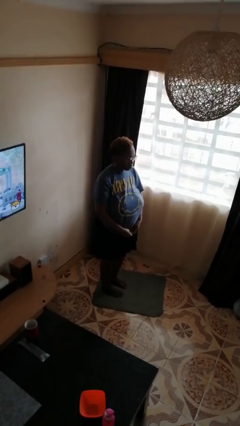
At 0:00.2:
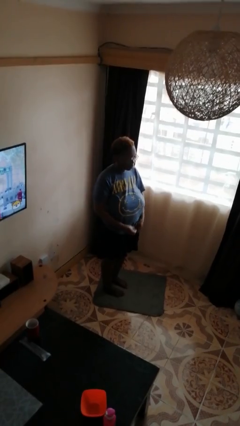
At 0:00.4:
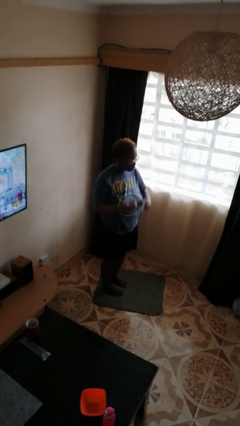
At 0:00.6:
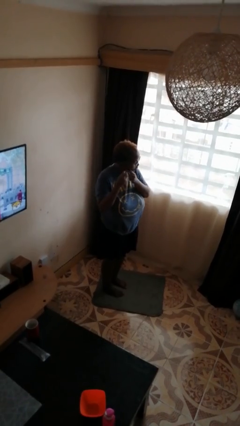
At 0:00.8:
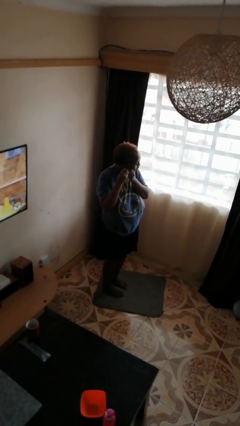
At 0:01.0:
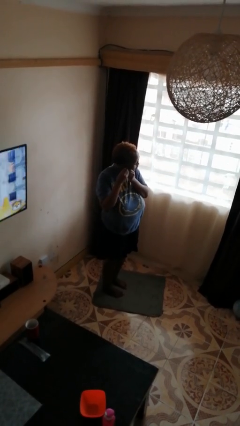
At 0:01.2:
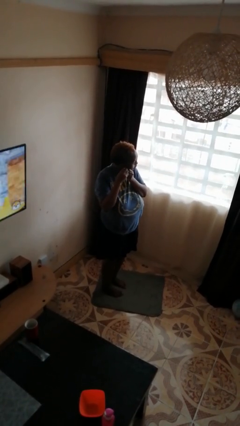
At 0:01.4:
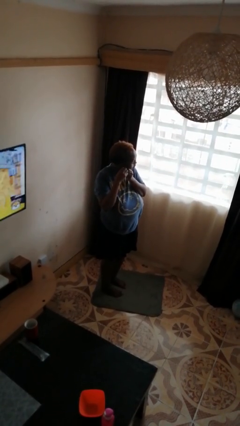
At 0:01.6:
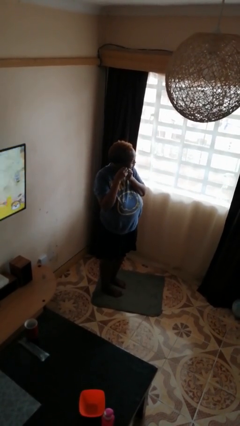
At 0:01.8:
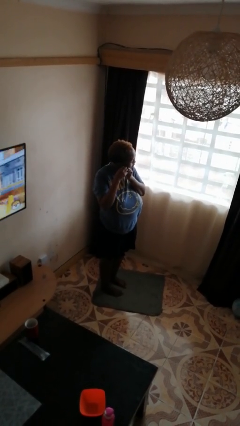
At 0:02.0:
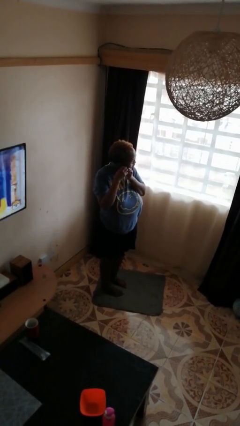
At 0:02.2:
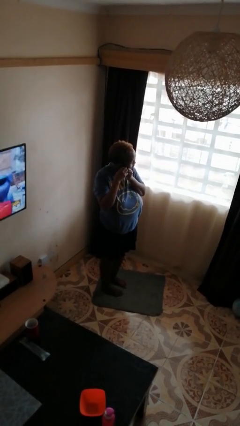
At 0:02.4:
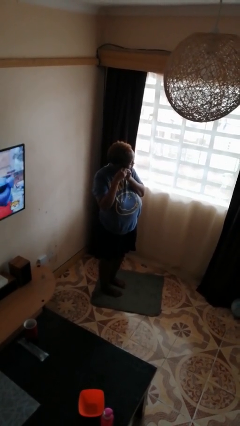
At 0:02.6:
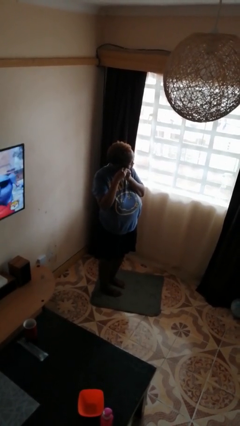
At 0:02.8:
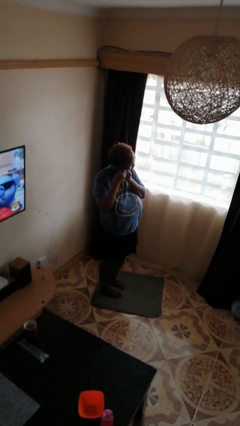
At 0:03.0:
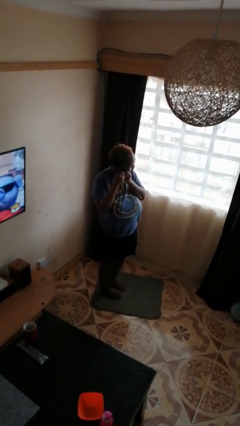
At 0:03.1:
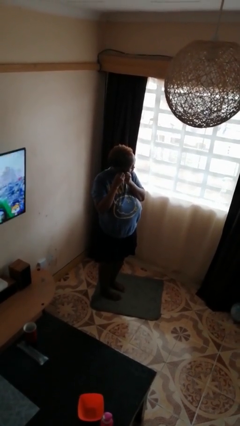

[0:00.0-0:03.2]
person puts on earrings

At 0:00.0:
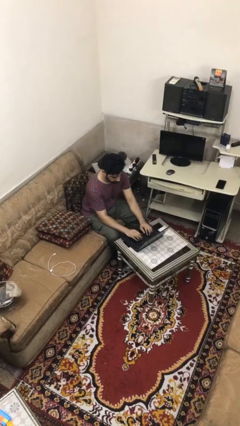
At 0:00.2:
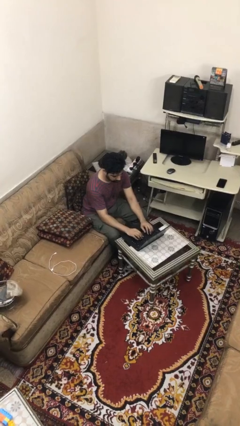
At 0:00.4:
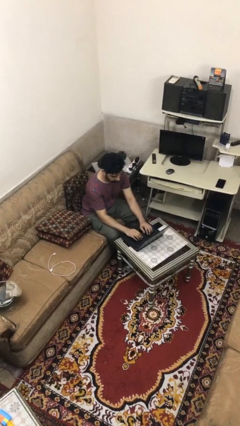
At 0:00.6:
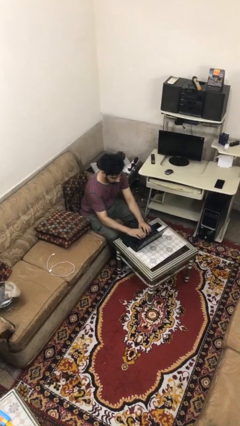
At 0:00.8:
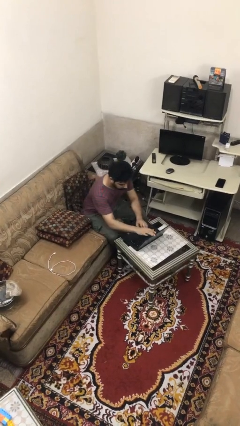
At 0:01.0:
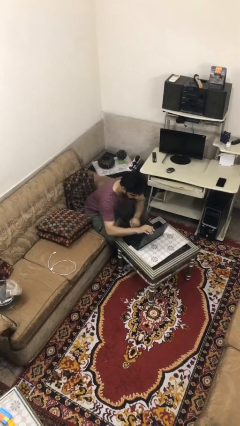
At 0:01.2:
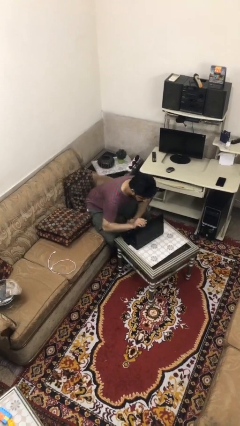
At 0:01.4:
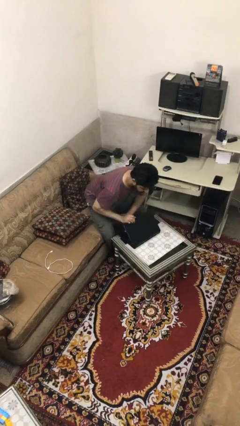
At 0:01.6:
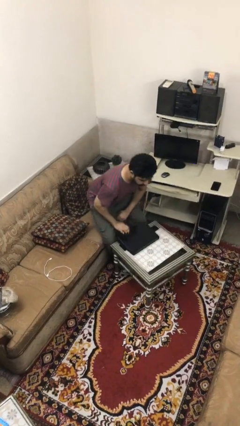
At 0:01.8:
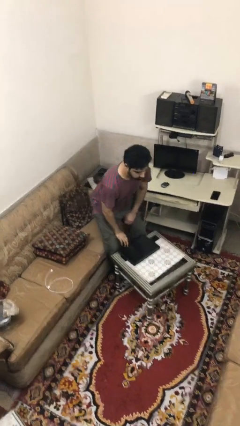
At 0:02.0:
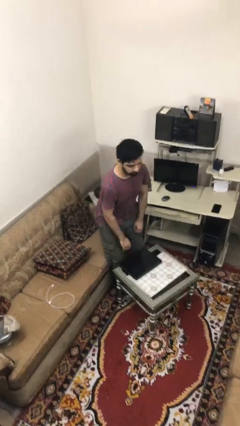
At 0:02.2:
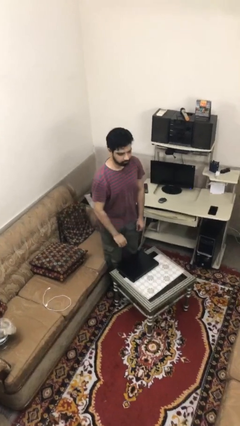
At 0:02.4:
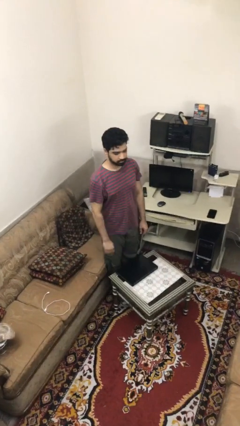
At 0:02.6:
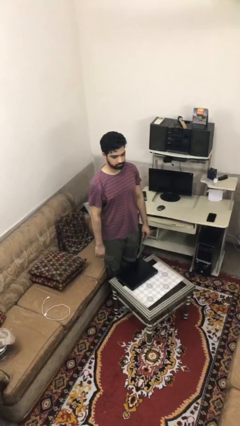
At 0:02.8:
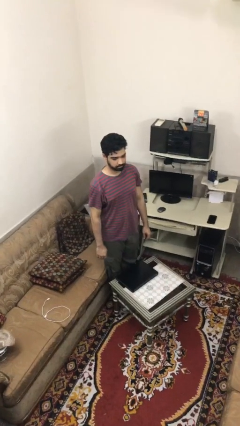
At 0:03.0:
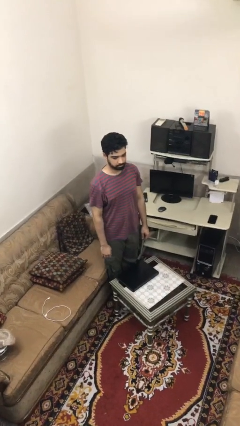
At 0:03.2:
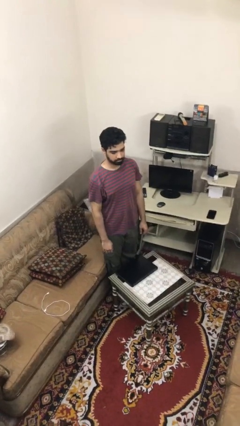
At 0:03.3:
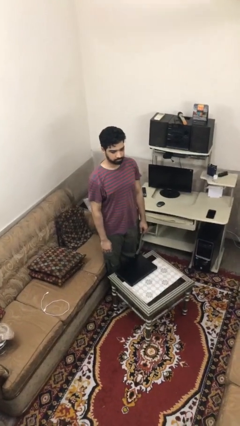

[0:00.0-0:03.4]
person stands up

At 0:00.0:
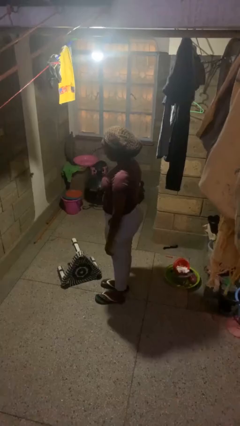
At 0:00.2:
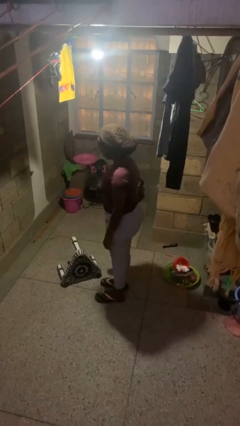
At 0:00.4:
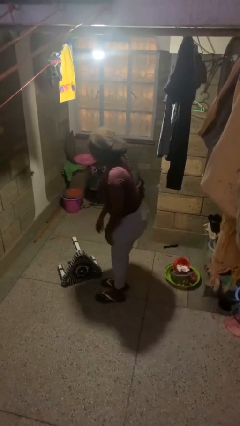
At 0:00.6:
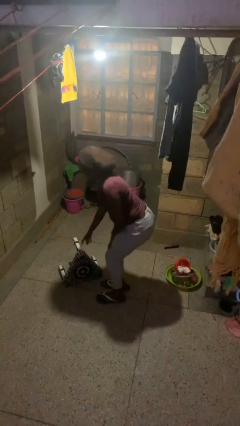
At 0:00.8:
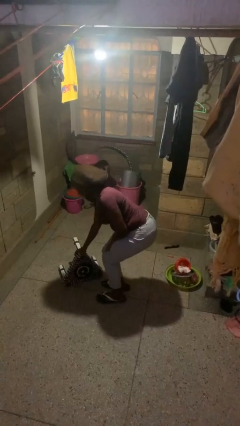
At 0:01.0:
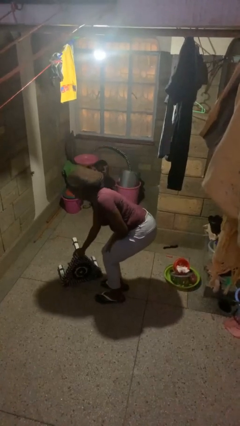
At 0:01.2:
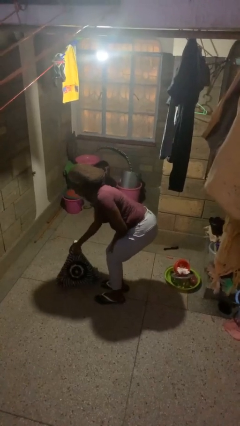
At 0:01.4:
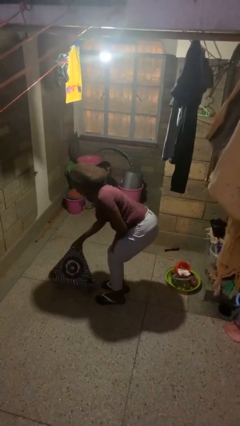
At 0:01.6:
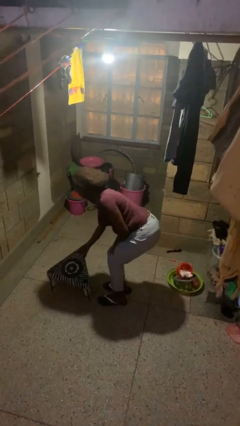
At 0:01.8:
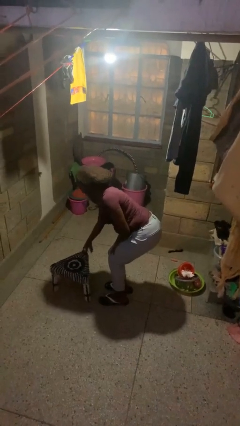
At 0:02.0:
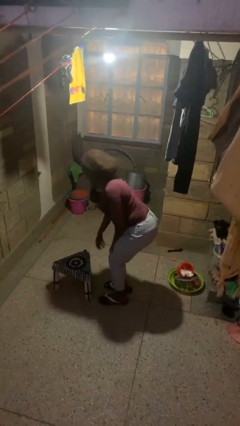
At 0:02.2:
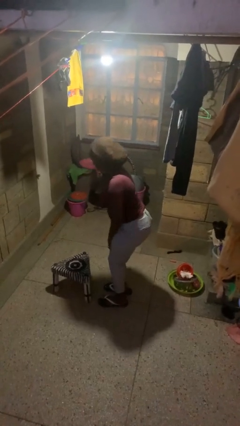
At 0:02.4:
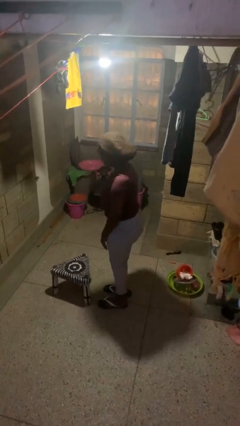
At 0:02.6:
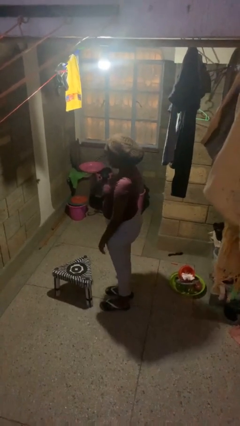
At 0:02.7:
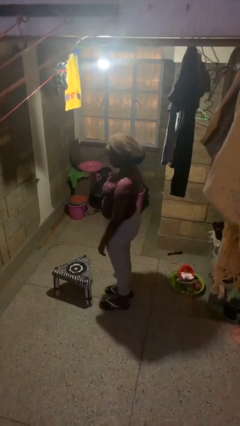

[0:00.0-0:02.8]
person sets upright furniture

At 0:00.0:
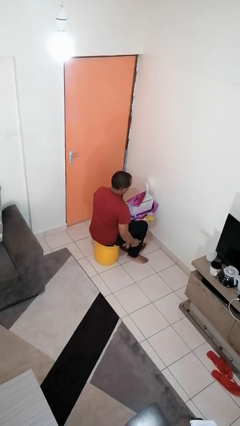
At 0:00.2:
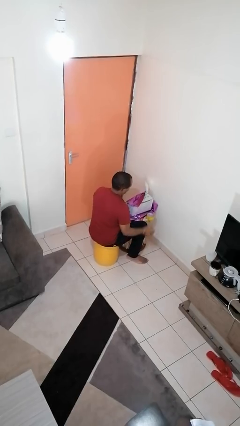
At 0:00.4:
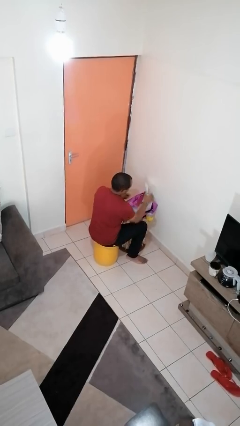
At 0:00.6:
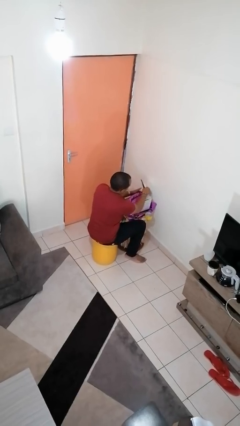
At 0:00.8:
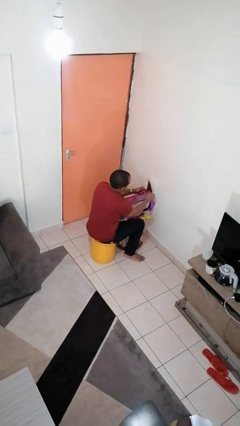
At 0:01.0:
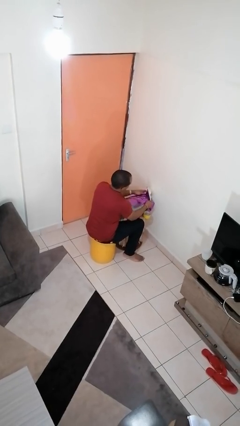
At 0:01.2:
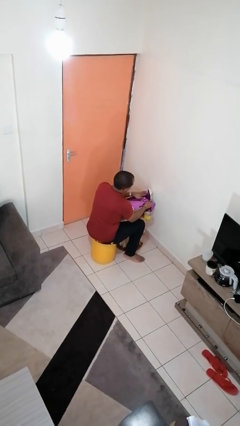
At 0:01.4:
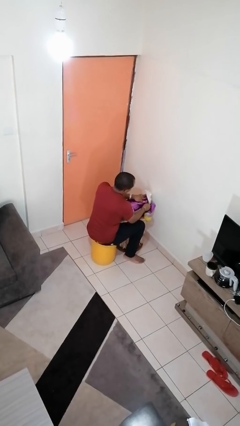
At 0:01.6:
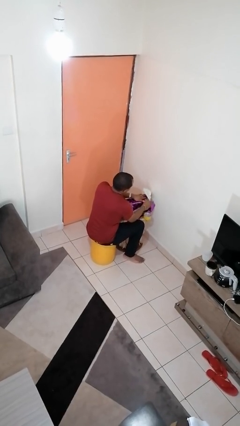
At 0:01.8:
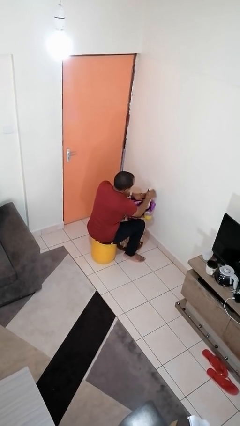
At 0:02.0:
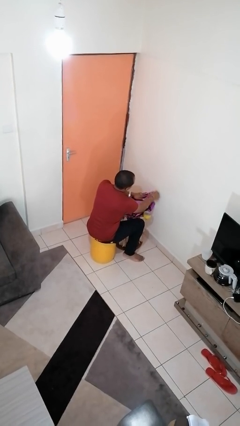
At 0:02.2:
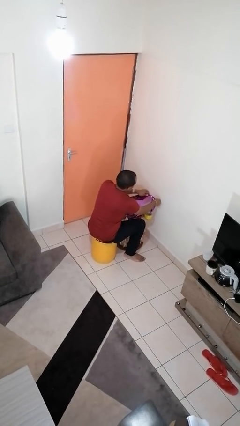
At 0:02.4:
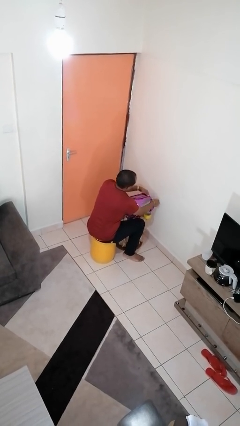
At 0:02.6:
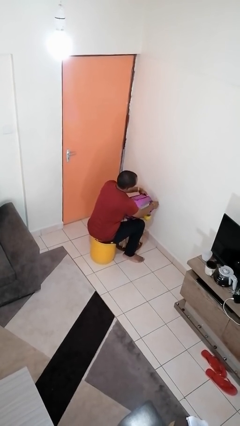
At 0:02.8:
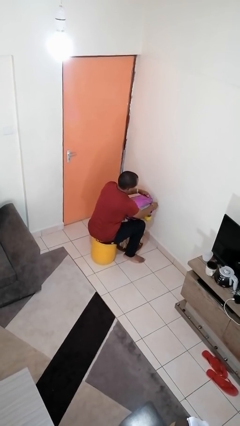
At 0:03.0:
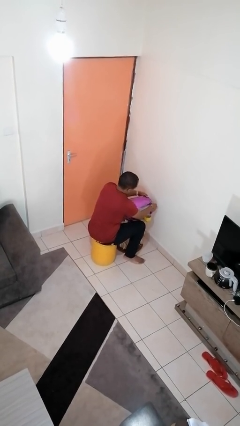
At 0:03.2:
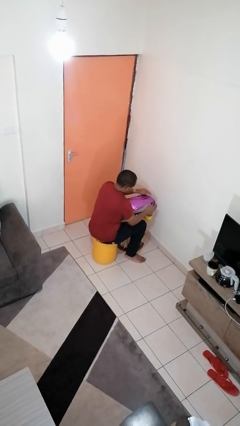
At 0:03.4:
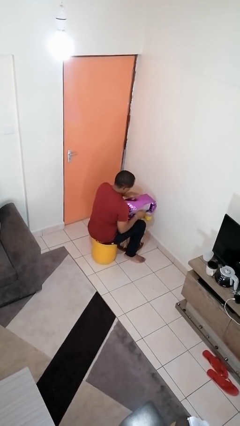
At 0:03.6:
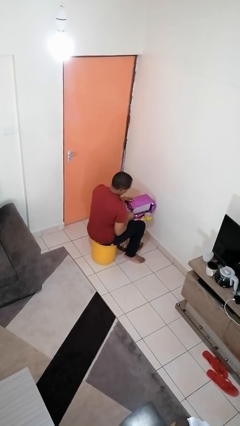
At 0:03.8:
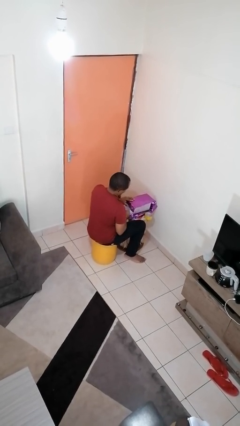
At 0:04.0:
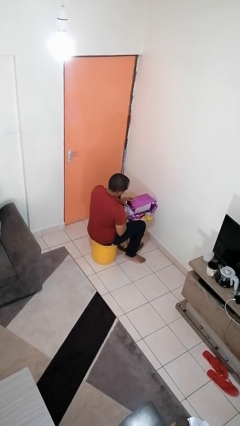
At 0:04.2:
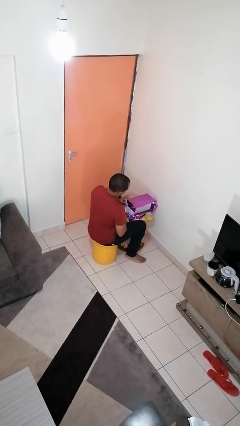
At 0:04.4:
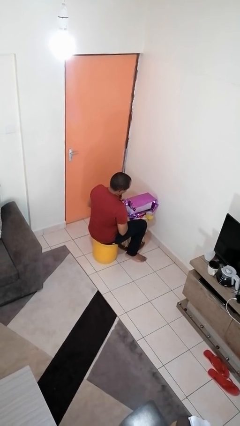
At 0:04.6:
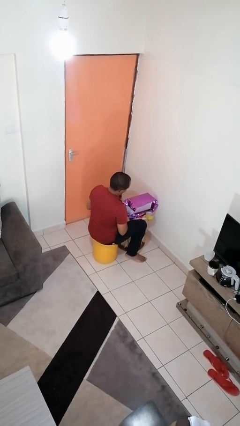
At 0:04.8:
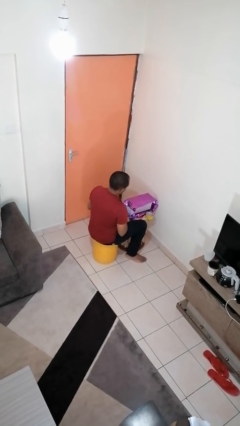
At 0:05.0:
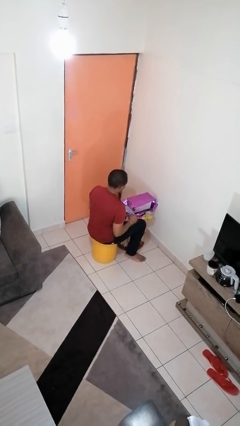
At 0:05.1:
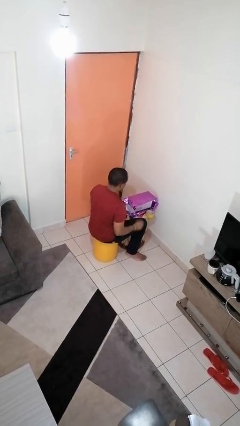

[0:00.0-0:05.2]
person wraps box

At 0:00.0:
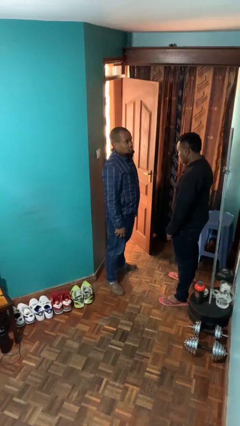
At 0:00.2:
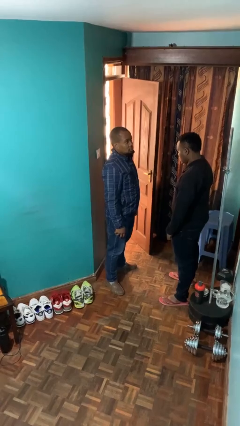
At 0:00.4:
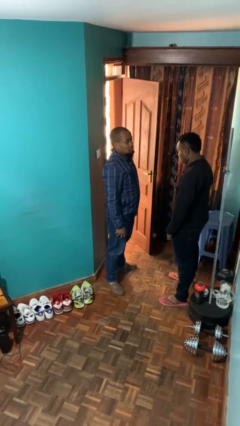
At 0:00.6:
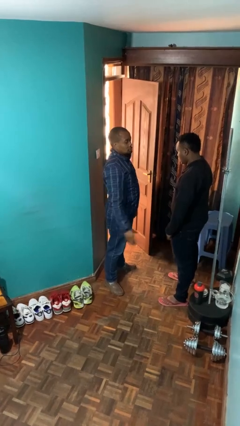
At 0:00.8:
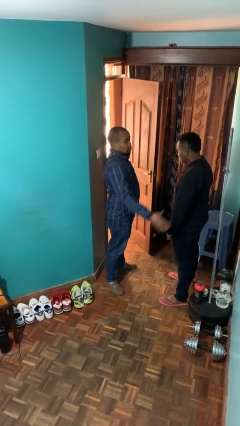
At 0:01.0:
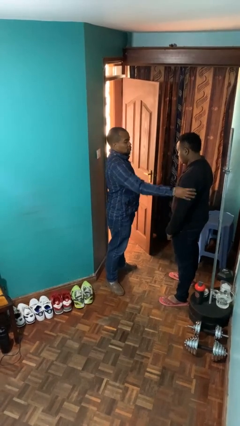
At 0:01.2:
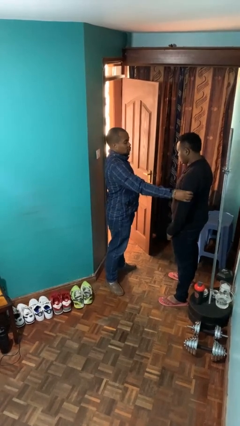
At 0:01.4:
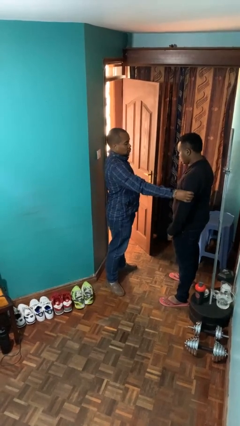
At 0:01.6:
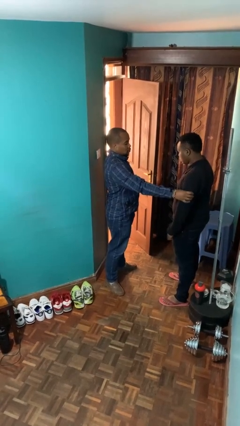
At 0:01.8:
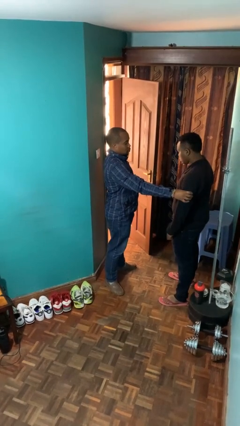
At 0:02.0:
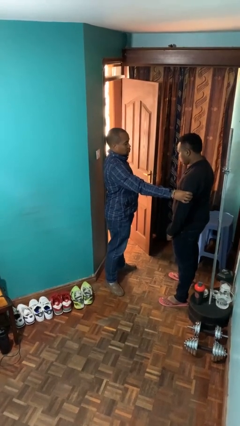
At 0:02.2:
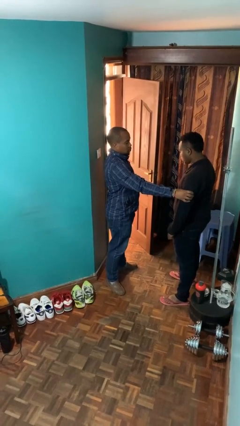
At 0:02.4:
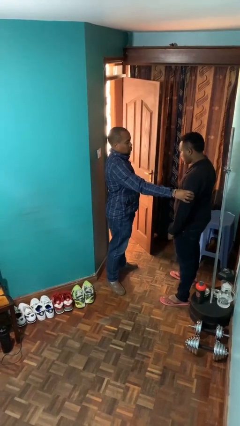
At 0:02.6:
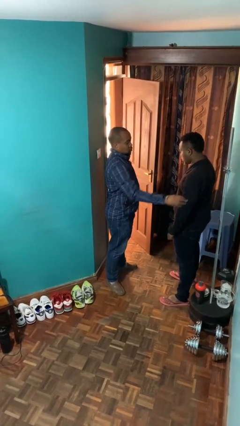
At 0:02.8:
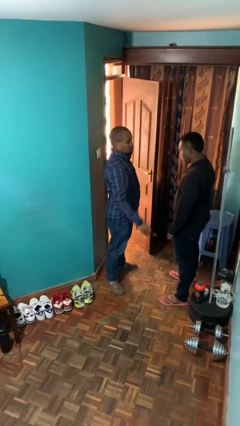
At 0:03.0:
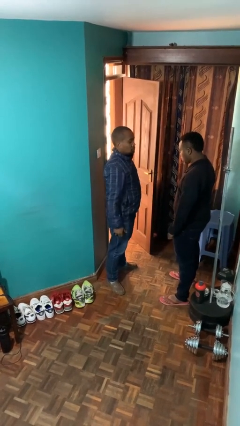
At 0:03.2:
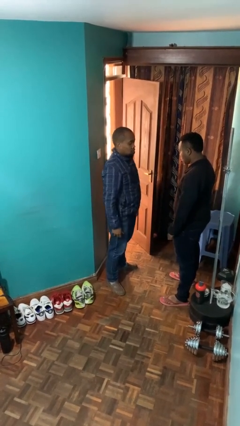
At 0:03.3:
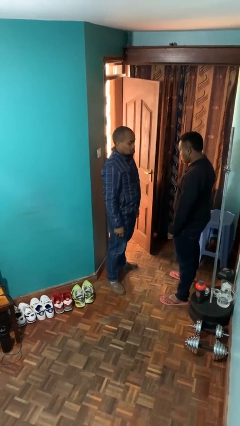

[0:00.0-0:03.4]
person grabs person by bicep
